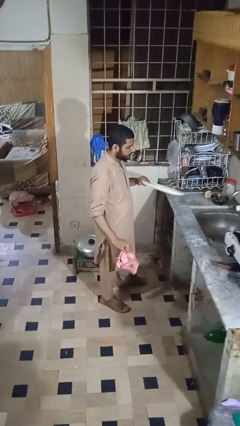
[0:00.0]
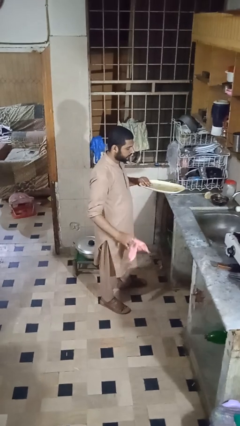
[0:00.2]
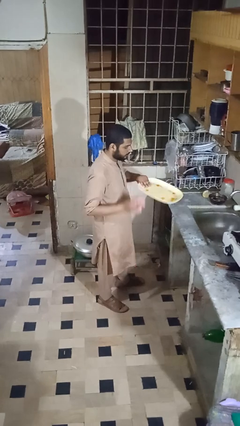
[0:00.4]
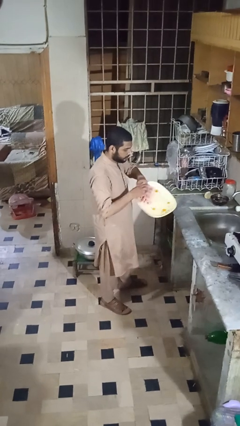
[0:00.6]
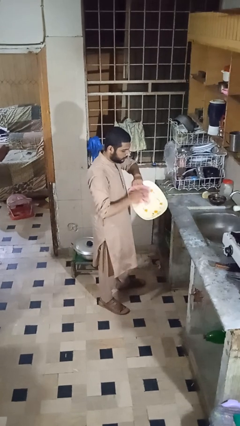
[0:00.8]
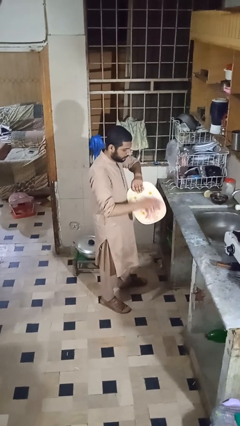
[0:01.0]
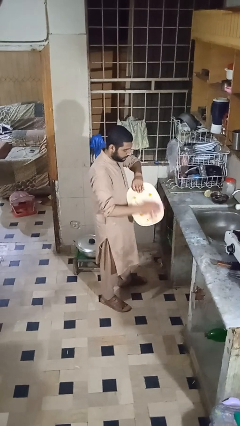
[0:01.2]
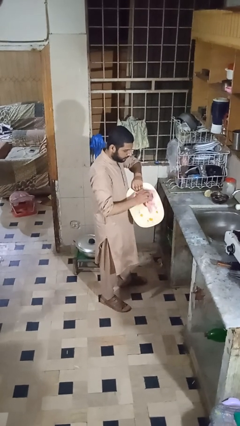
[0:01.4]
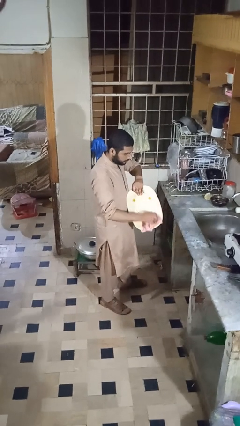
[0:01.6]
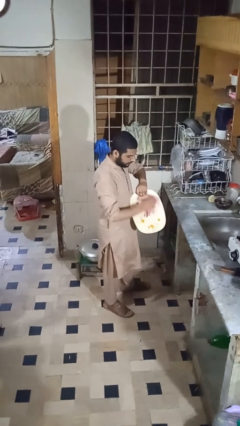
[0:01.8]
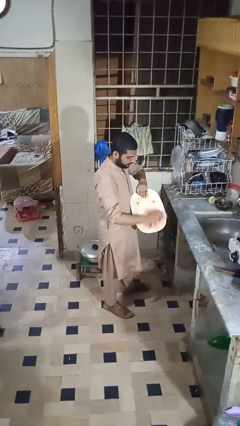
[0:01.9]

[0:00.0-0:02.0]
person dries dish

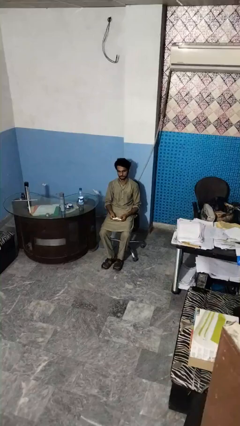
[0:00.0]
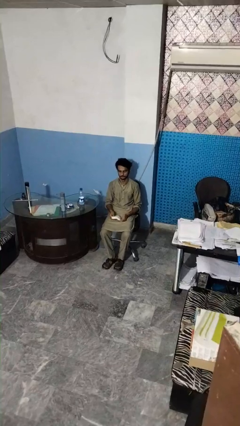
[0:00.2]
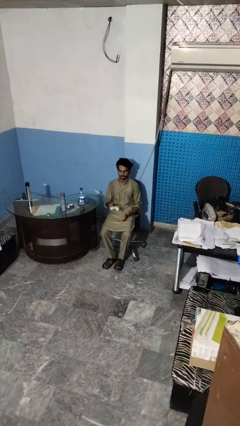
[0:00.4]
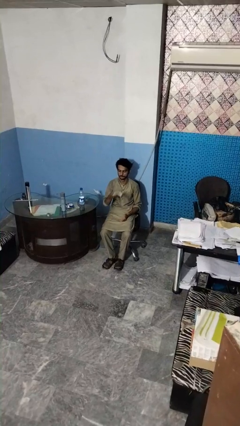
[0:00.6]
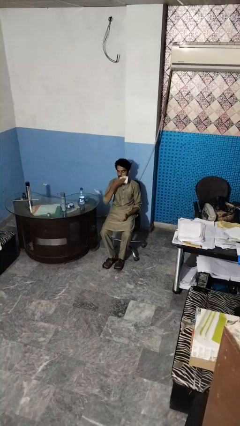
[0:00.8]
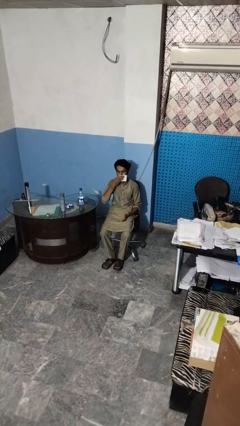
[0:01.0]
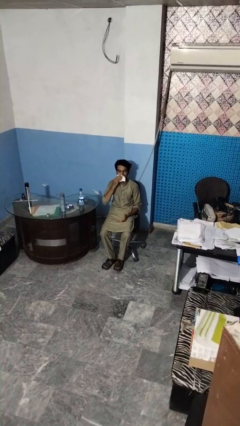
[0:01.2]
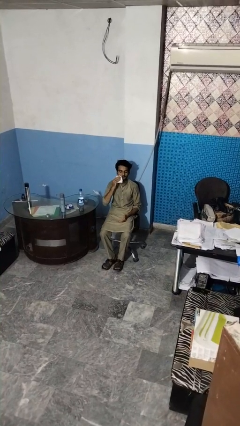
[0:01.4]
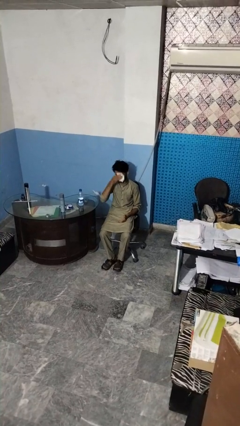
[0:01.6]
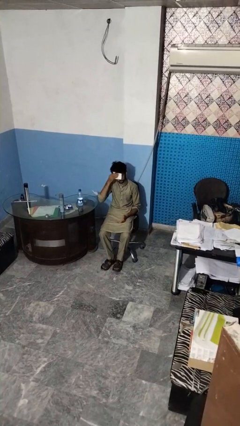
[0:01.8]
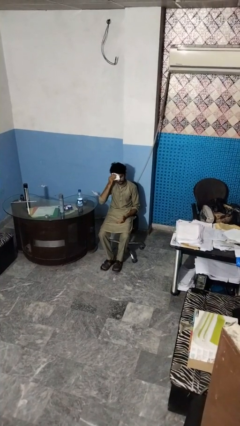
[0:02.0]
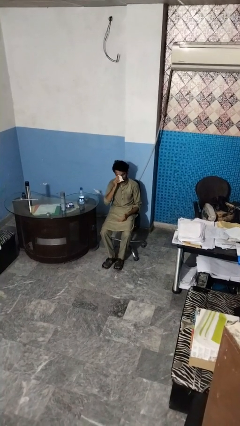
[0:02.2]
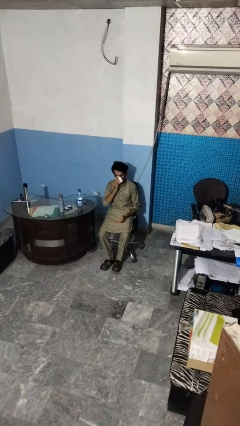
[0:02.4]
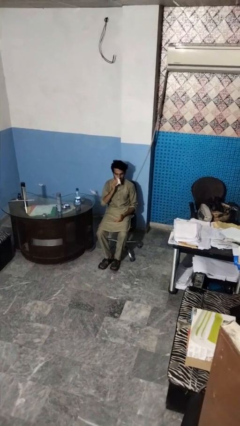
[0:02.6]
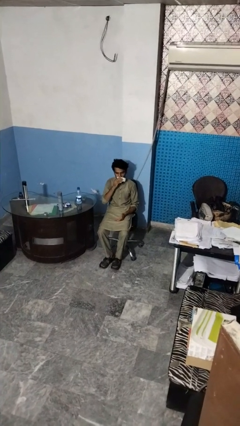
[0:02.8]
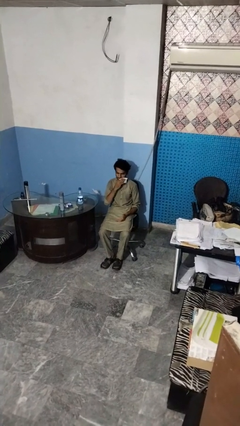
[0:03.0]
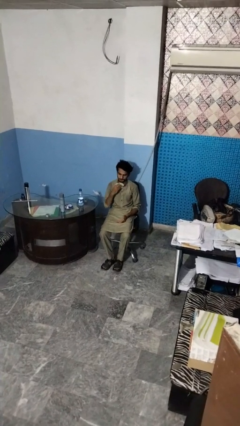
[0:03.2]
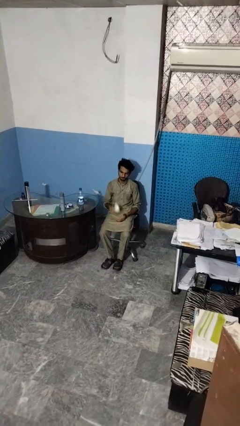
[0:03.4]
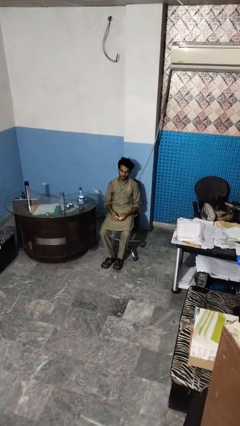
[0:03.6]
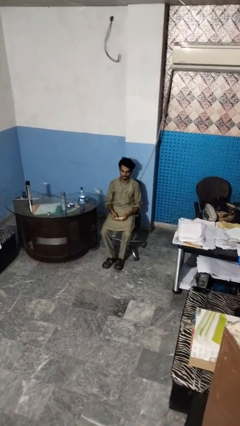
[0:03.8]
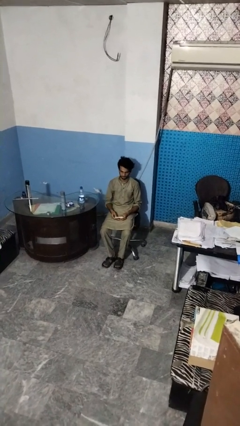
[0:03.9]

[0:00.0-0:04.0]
person wipes mouth with napkin

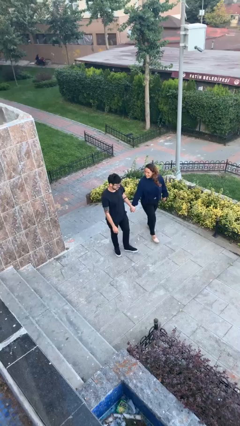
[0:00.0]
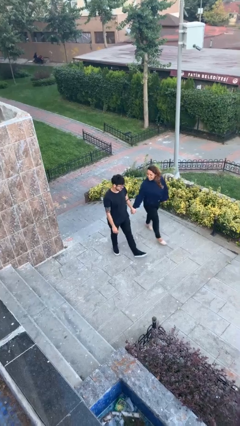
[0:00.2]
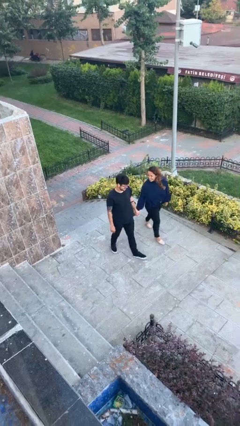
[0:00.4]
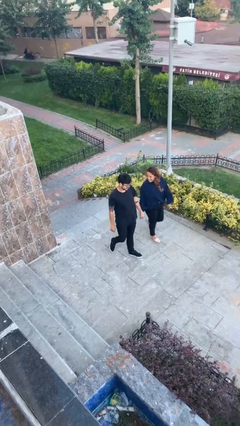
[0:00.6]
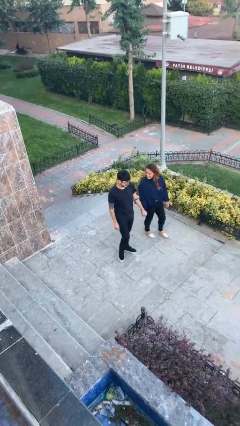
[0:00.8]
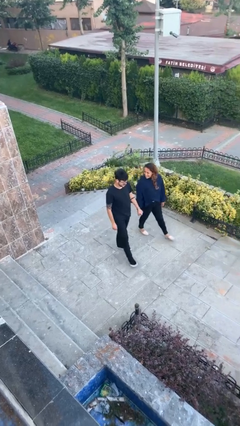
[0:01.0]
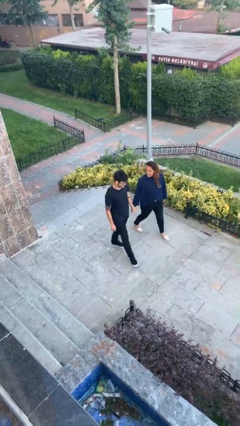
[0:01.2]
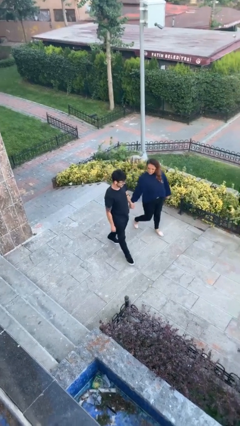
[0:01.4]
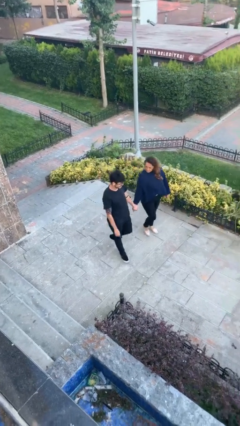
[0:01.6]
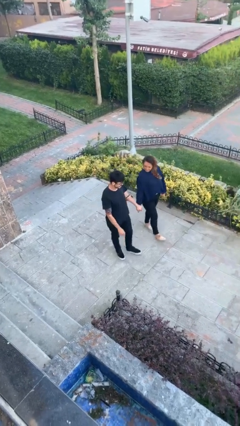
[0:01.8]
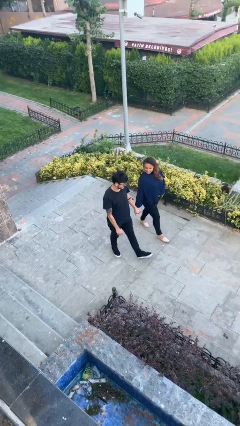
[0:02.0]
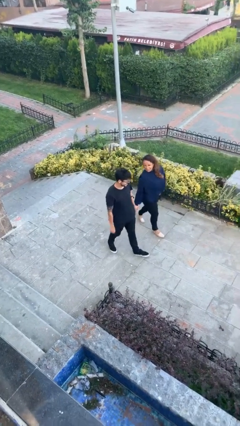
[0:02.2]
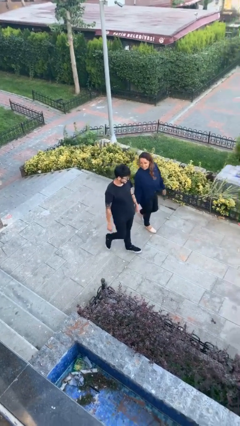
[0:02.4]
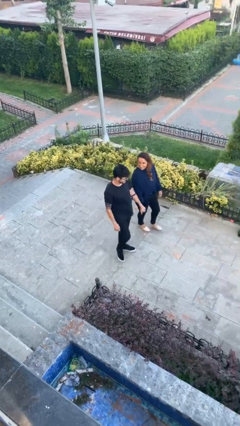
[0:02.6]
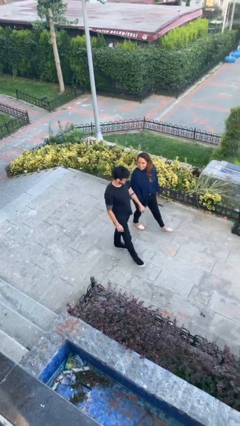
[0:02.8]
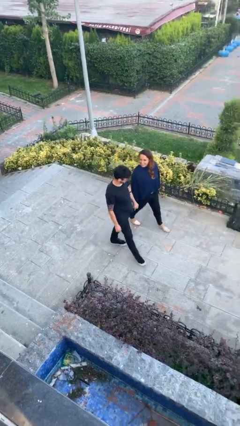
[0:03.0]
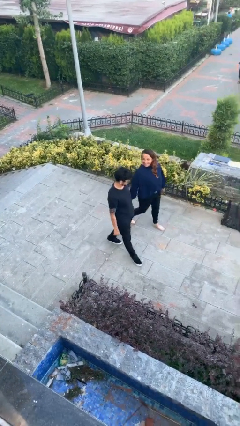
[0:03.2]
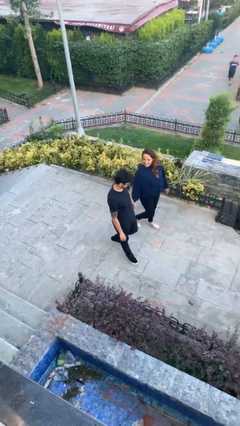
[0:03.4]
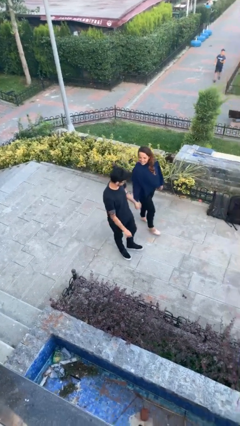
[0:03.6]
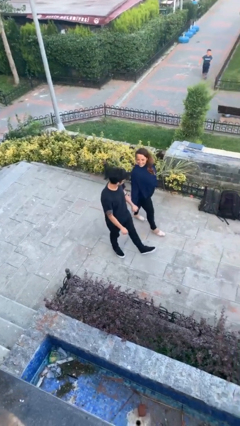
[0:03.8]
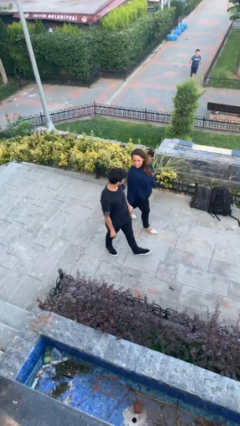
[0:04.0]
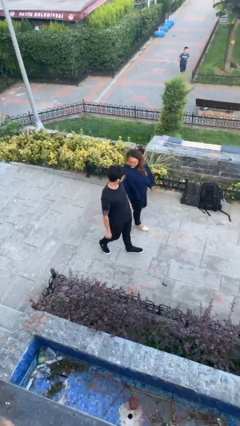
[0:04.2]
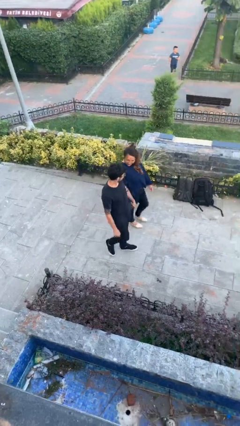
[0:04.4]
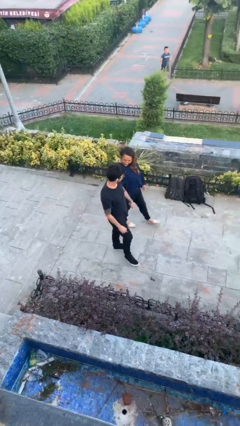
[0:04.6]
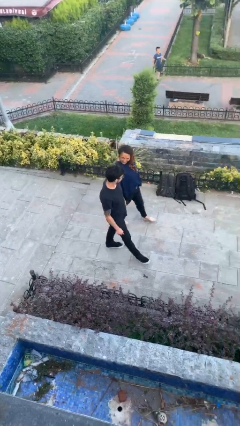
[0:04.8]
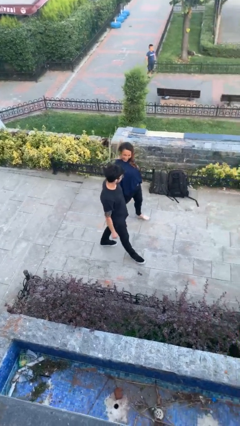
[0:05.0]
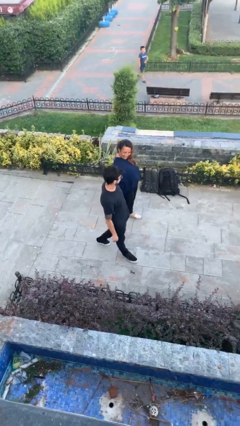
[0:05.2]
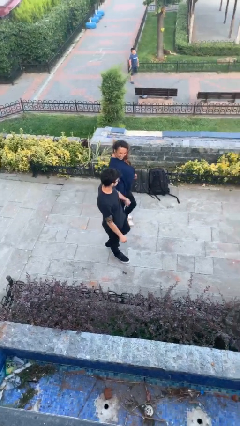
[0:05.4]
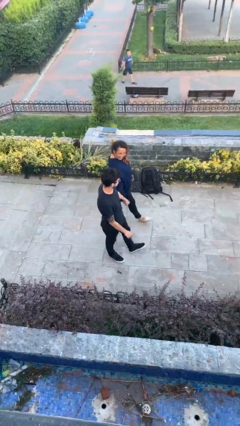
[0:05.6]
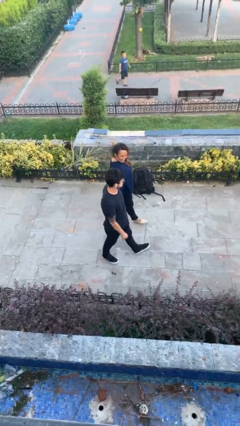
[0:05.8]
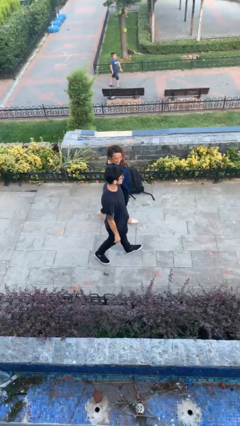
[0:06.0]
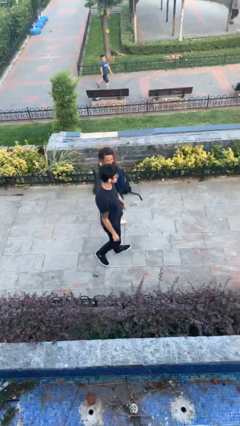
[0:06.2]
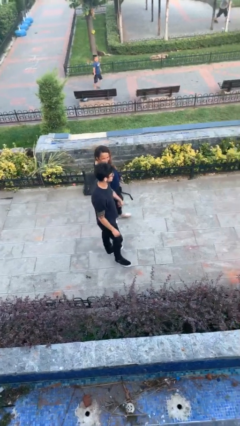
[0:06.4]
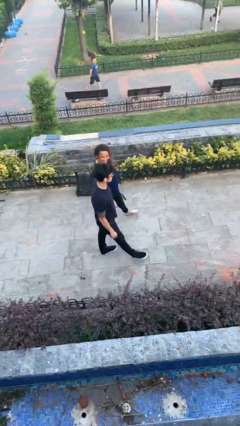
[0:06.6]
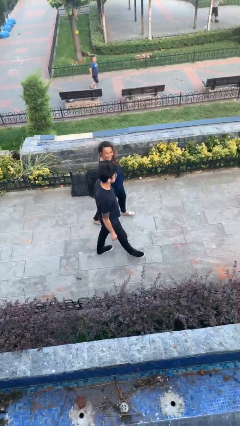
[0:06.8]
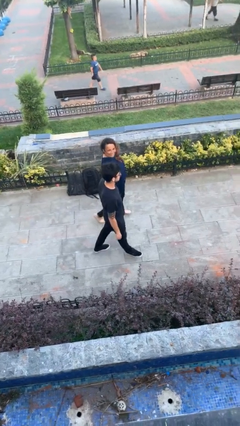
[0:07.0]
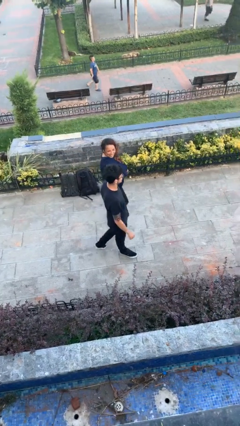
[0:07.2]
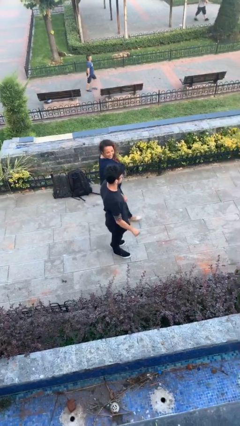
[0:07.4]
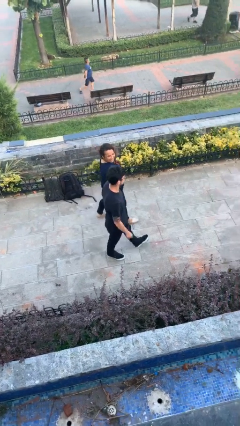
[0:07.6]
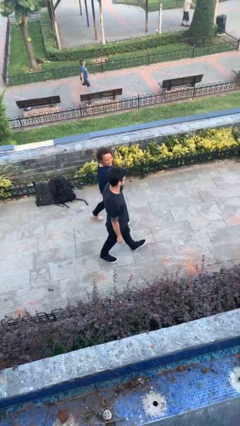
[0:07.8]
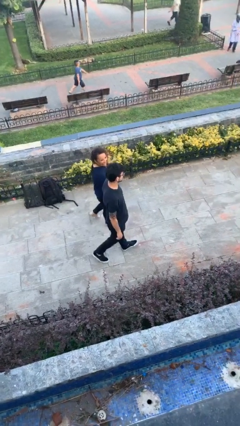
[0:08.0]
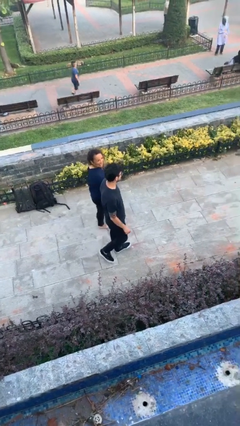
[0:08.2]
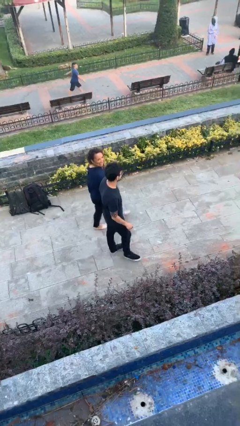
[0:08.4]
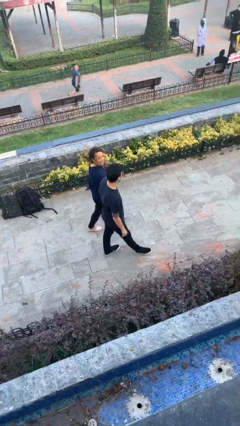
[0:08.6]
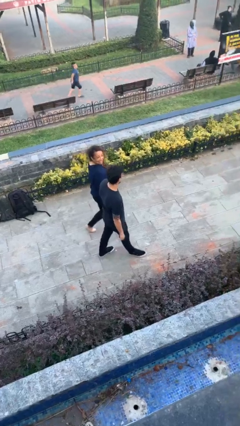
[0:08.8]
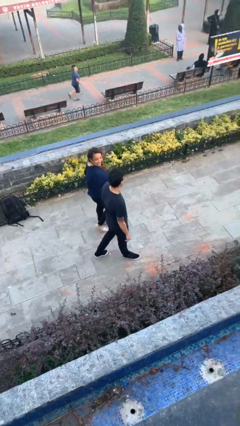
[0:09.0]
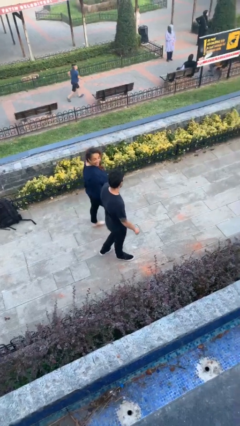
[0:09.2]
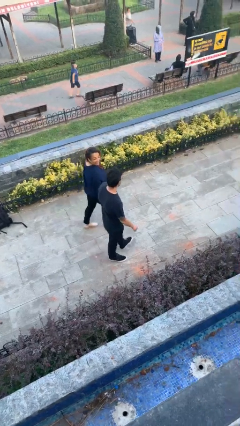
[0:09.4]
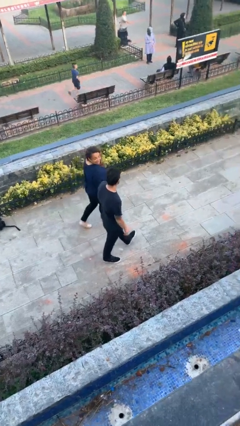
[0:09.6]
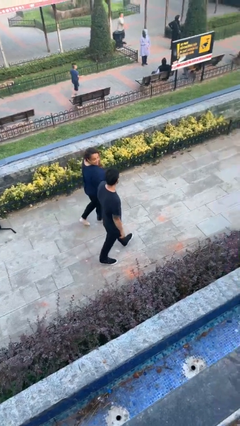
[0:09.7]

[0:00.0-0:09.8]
person holds hand

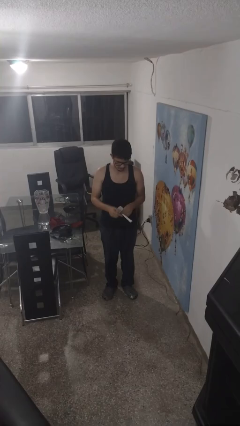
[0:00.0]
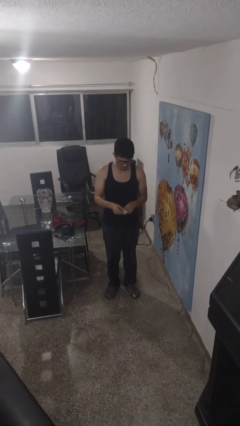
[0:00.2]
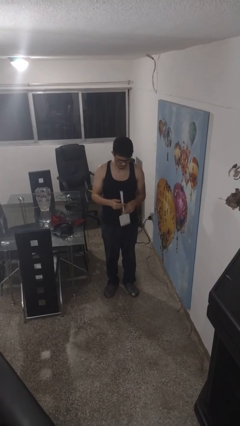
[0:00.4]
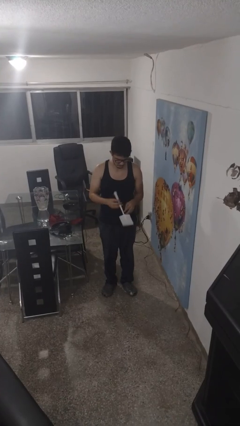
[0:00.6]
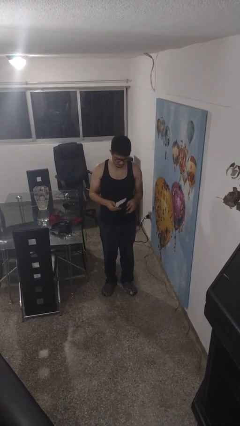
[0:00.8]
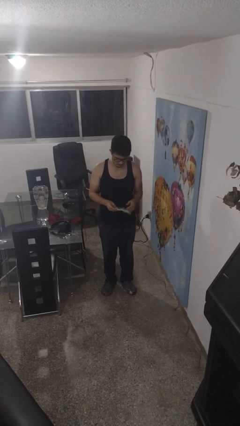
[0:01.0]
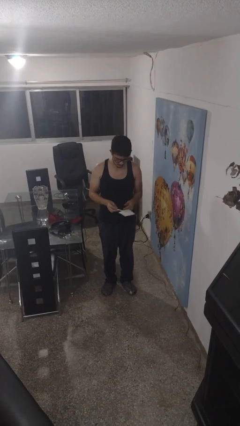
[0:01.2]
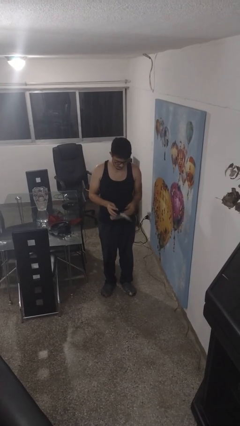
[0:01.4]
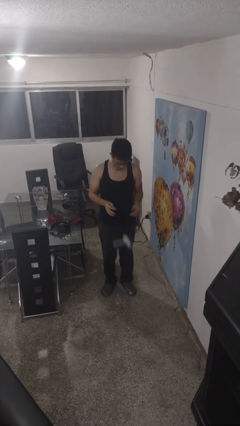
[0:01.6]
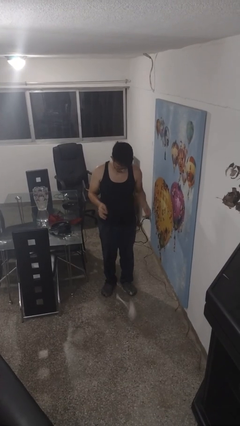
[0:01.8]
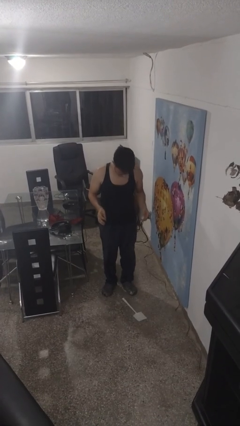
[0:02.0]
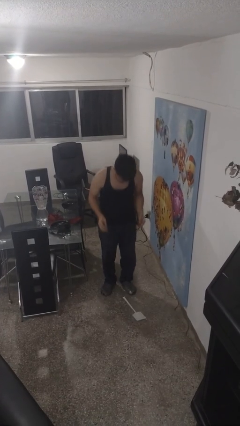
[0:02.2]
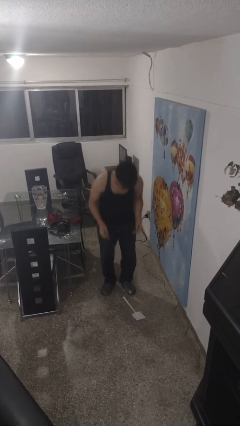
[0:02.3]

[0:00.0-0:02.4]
person drops object
